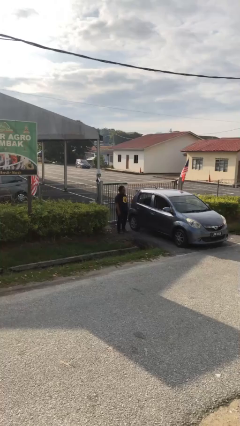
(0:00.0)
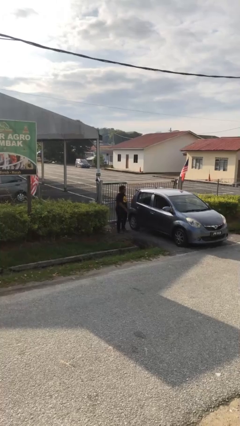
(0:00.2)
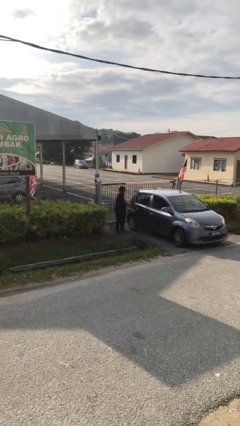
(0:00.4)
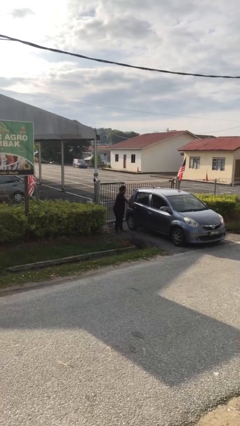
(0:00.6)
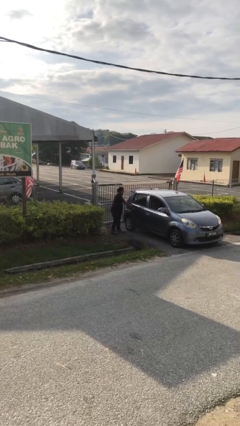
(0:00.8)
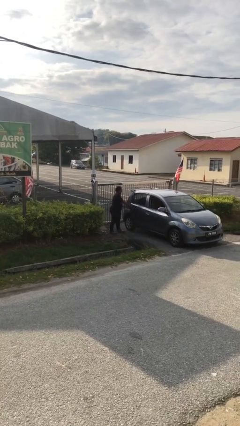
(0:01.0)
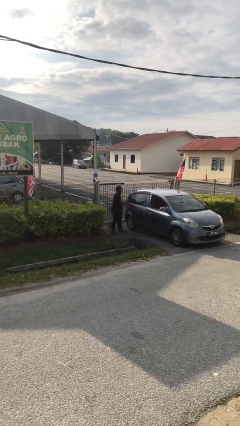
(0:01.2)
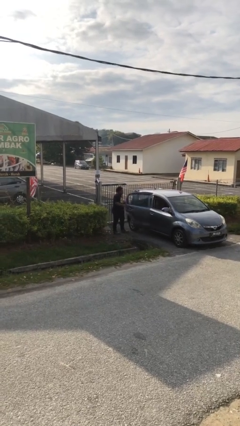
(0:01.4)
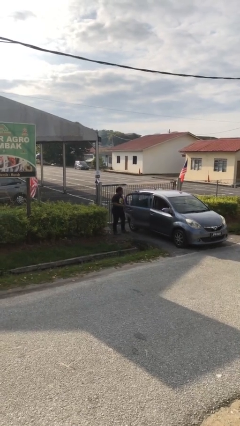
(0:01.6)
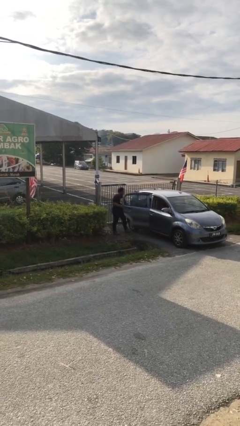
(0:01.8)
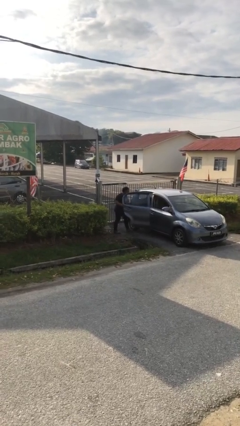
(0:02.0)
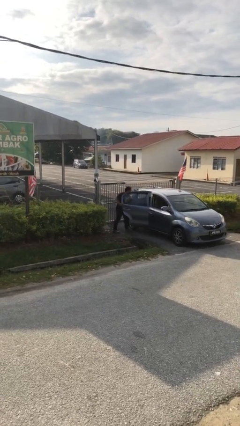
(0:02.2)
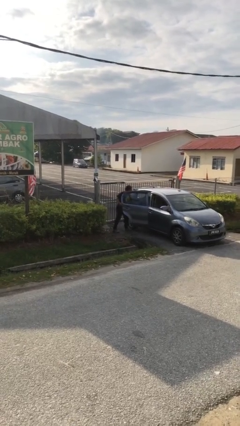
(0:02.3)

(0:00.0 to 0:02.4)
person opens car door

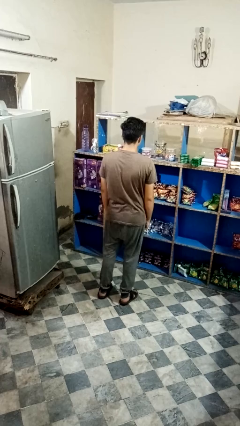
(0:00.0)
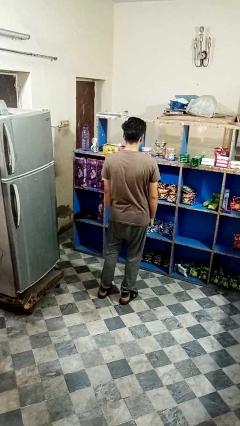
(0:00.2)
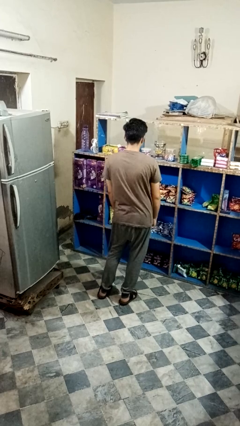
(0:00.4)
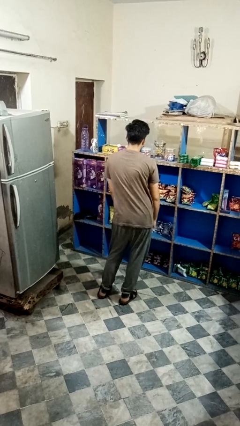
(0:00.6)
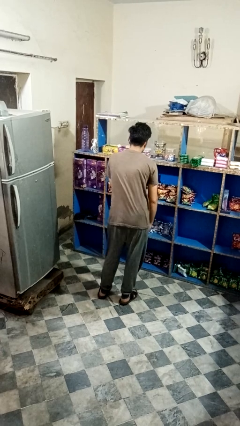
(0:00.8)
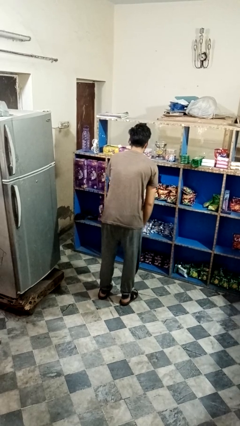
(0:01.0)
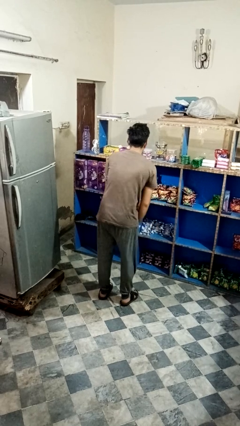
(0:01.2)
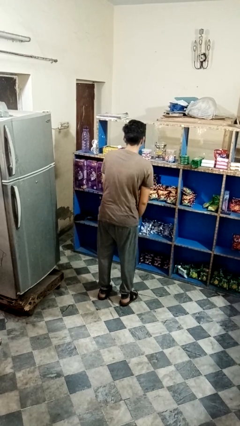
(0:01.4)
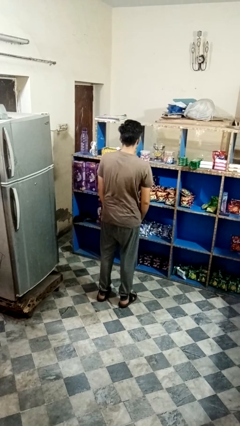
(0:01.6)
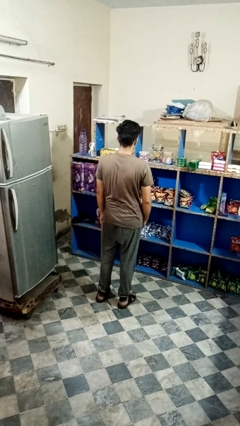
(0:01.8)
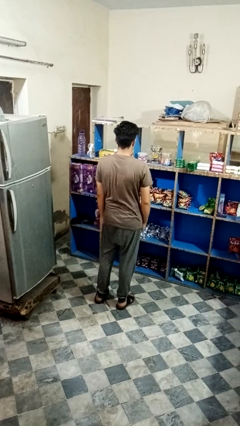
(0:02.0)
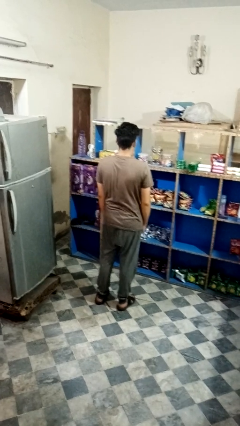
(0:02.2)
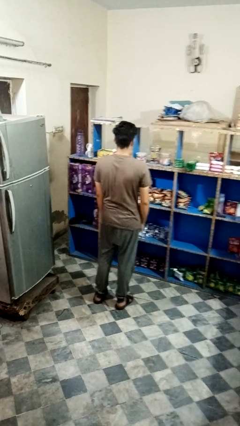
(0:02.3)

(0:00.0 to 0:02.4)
person wiggles hips

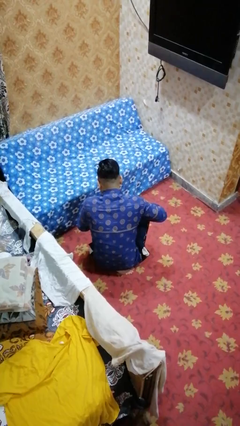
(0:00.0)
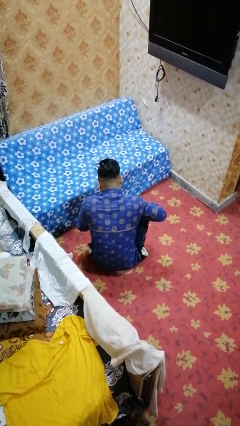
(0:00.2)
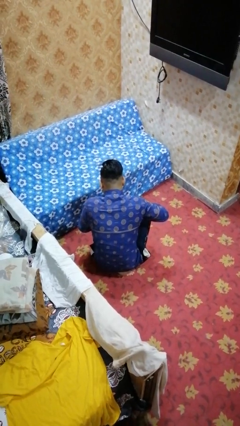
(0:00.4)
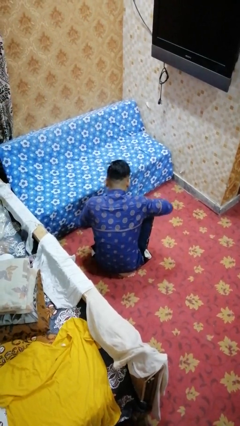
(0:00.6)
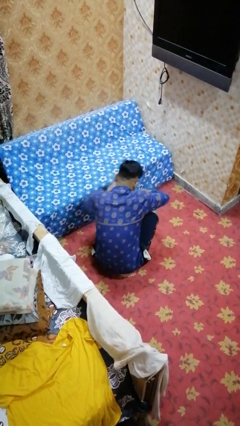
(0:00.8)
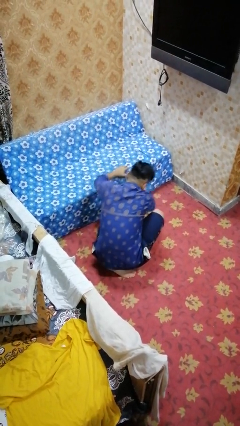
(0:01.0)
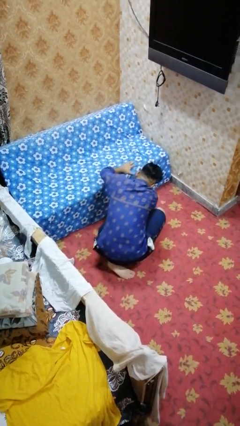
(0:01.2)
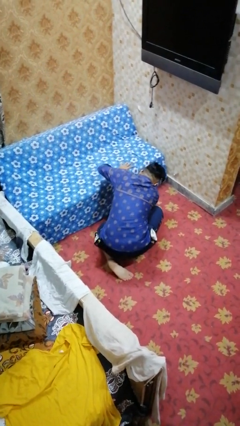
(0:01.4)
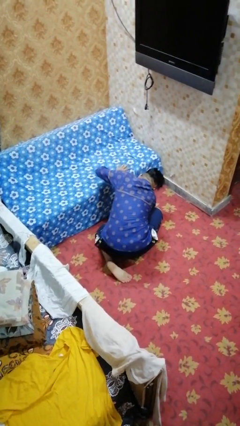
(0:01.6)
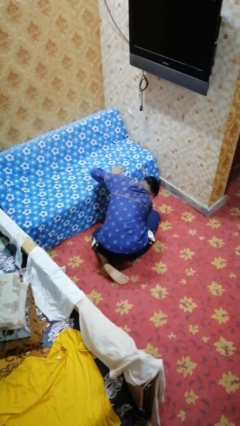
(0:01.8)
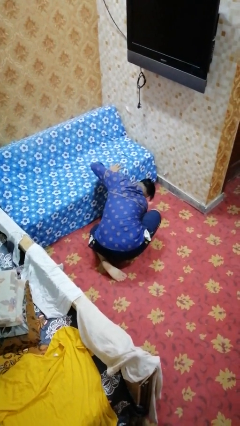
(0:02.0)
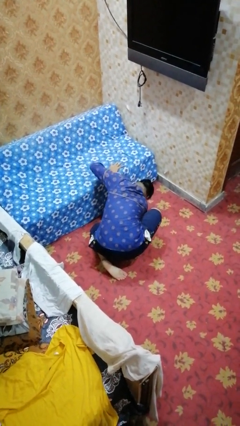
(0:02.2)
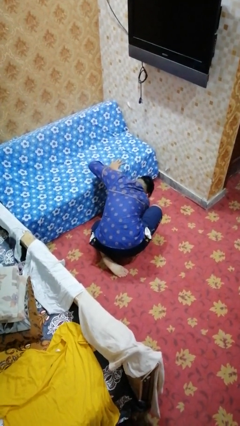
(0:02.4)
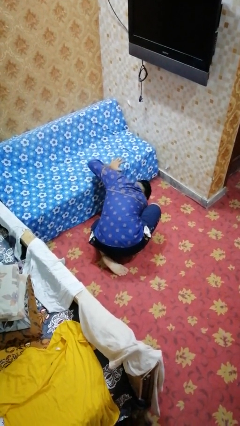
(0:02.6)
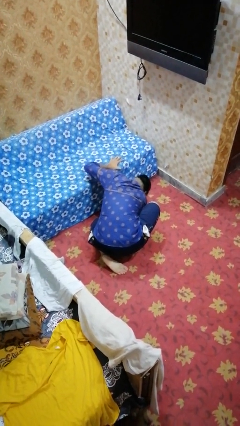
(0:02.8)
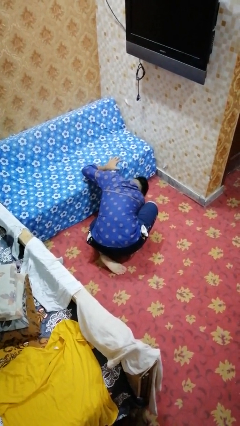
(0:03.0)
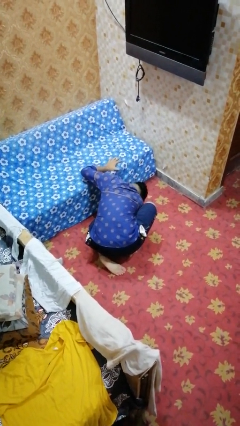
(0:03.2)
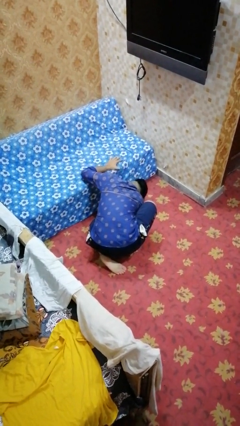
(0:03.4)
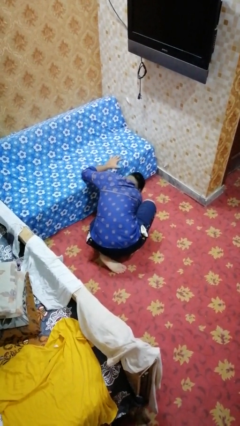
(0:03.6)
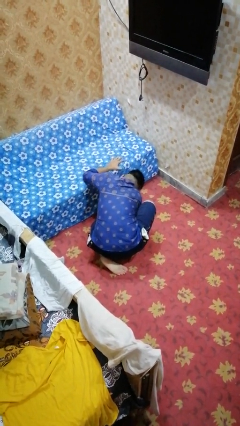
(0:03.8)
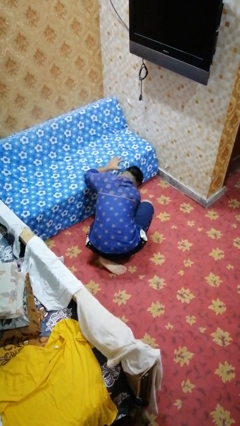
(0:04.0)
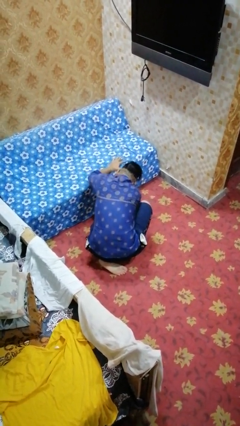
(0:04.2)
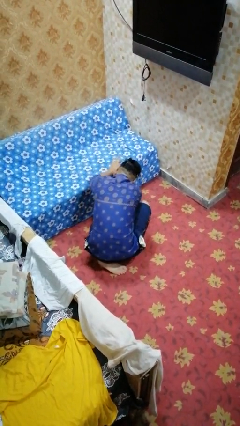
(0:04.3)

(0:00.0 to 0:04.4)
person searches under couch

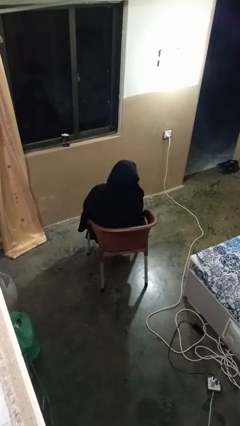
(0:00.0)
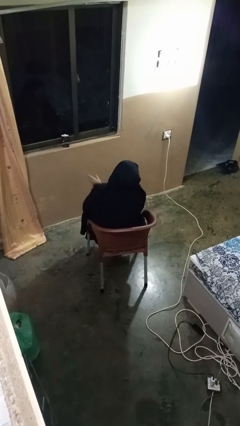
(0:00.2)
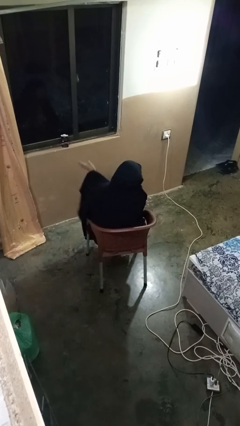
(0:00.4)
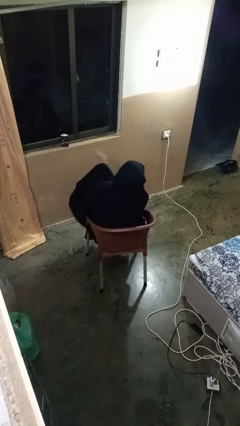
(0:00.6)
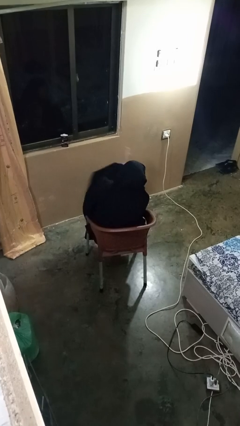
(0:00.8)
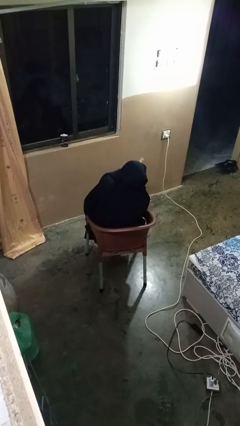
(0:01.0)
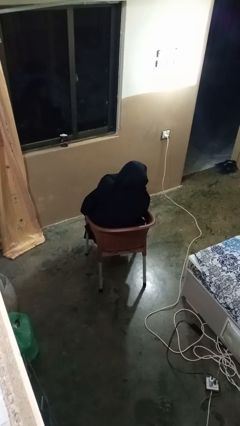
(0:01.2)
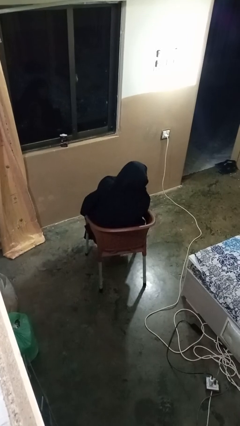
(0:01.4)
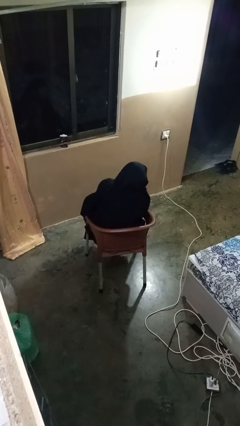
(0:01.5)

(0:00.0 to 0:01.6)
person gestures swipe right

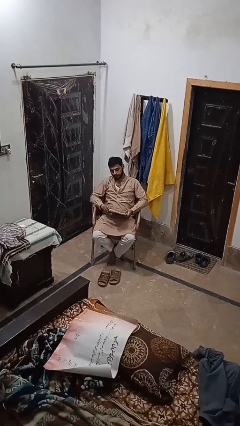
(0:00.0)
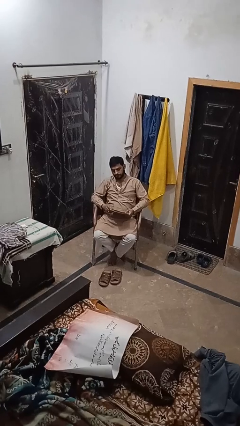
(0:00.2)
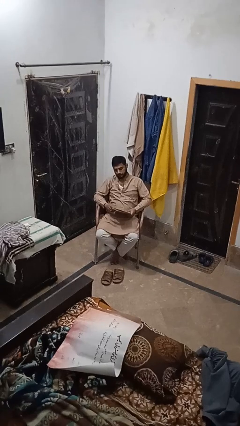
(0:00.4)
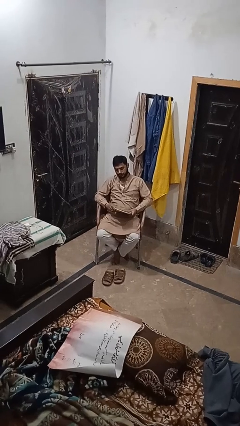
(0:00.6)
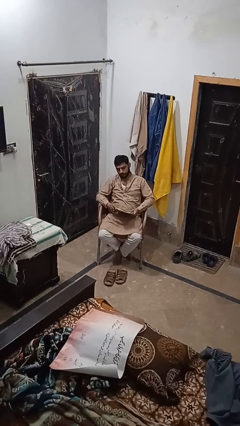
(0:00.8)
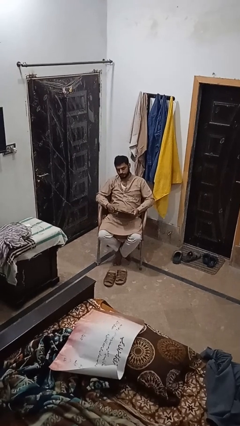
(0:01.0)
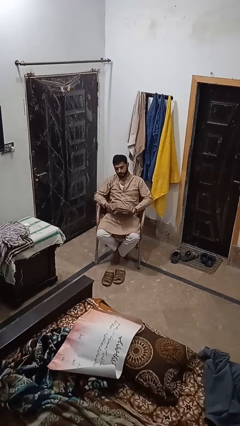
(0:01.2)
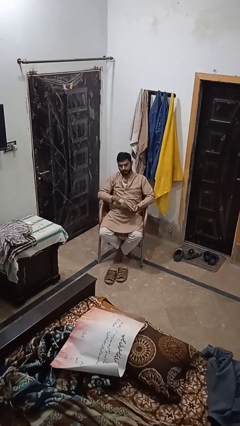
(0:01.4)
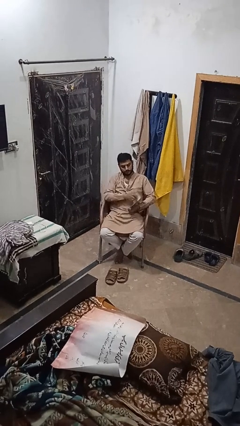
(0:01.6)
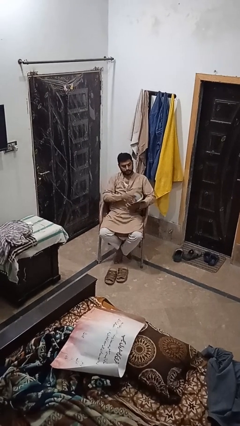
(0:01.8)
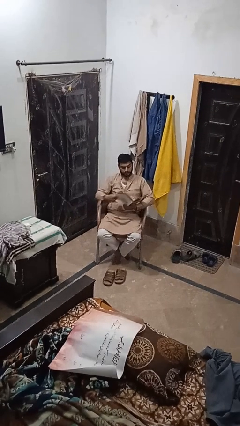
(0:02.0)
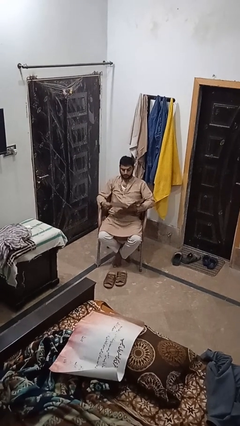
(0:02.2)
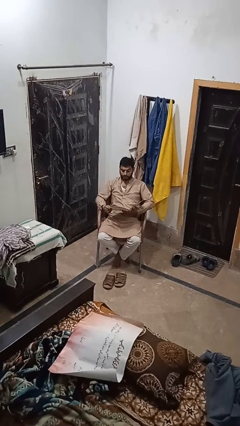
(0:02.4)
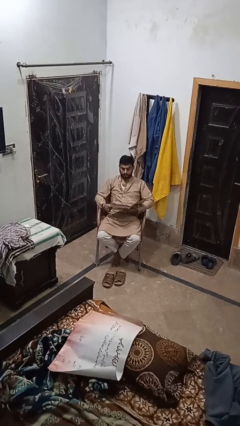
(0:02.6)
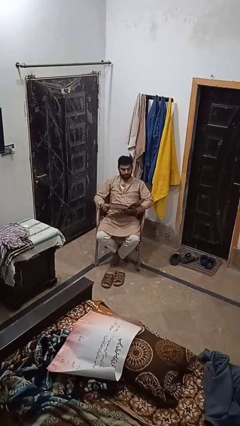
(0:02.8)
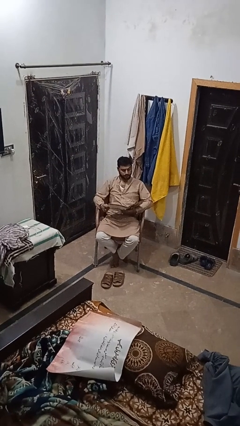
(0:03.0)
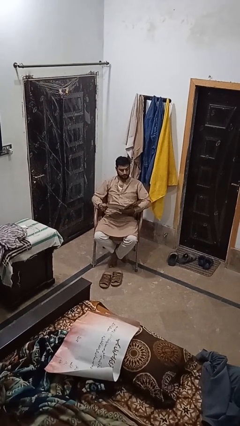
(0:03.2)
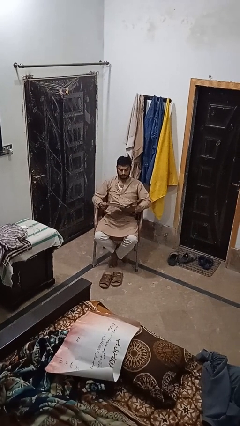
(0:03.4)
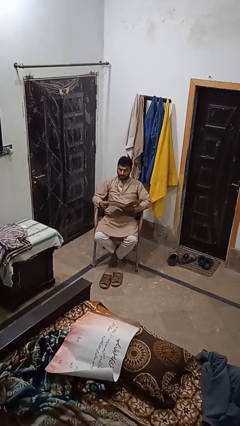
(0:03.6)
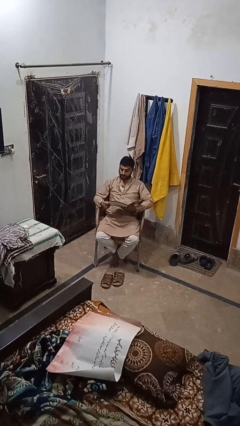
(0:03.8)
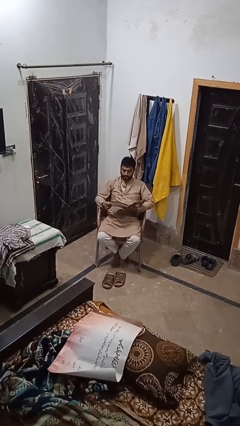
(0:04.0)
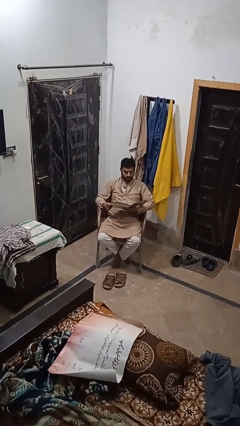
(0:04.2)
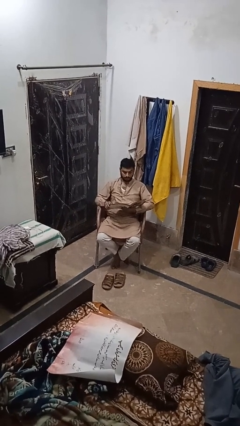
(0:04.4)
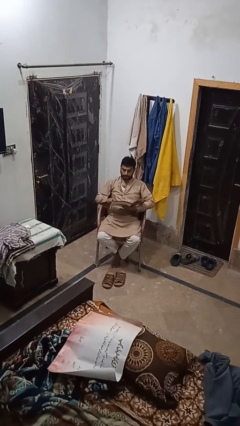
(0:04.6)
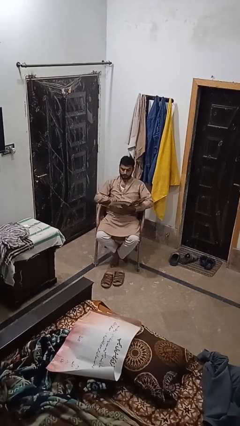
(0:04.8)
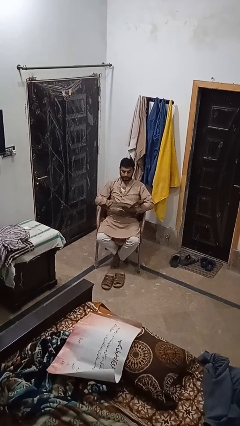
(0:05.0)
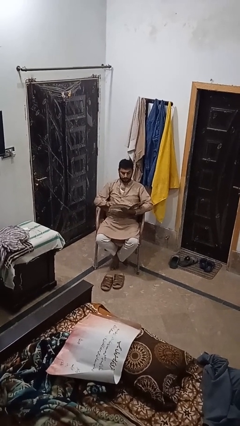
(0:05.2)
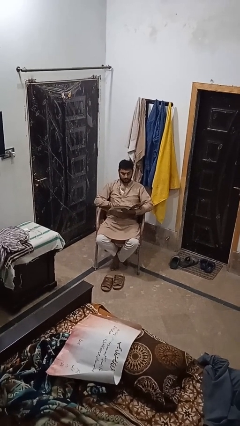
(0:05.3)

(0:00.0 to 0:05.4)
person reads magazine

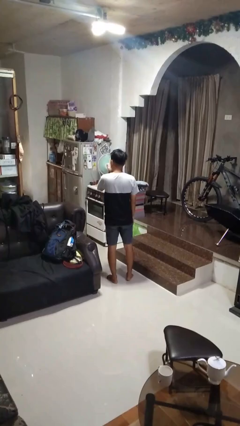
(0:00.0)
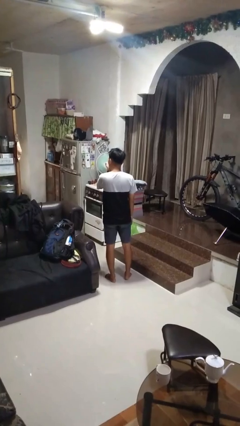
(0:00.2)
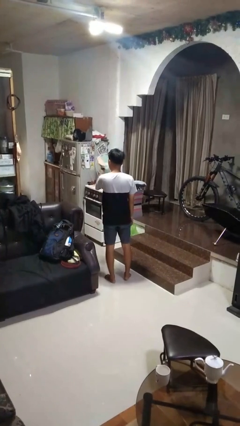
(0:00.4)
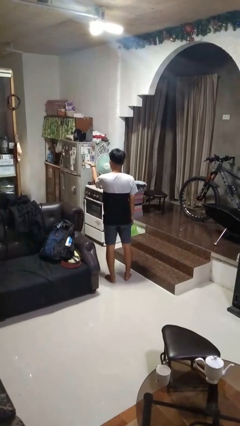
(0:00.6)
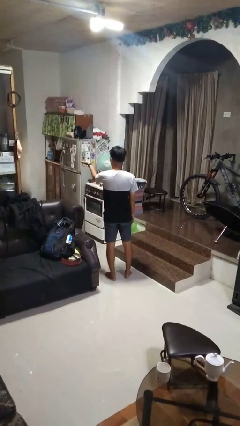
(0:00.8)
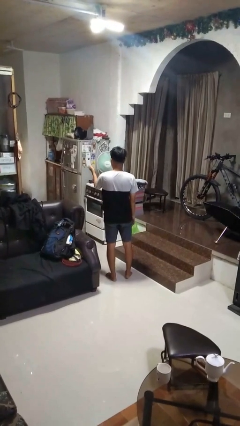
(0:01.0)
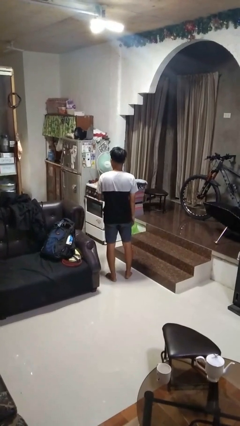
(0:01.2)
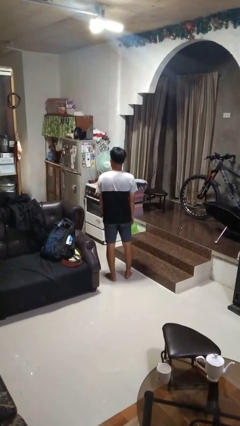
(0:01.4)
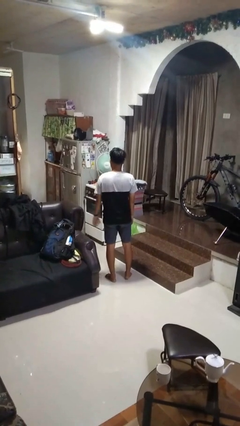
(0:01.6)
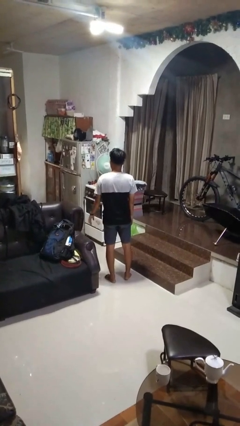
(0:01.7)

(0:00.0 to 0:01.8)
person gestures blow kiss
